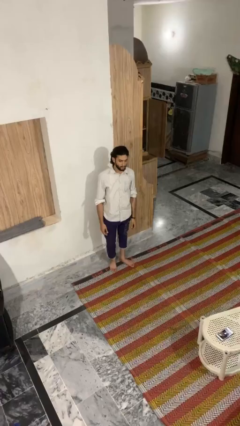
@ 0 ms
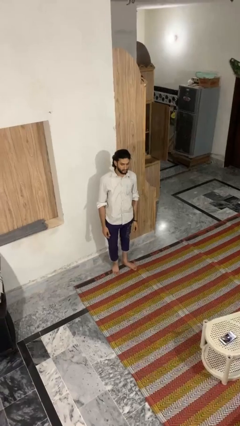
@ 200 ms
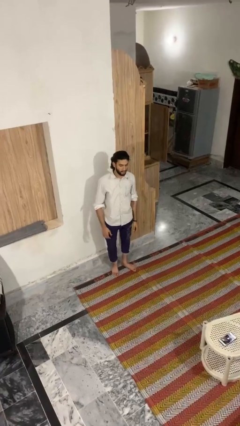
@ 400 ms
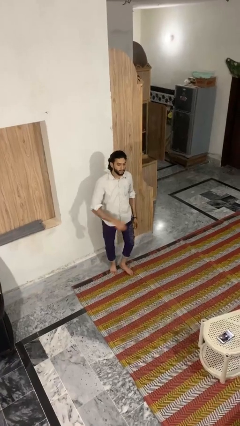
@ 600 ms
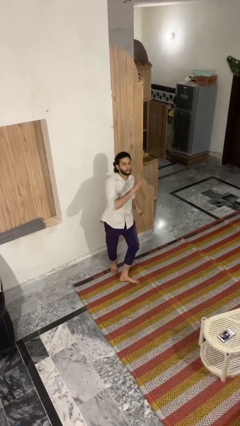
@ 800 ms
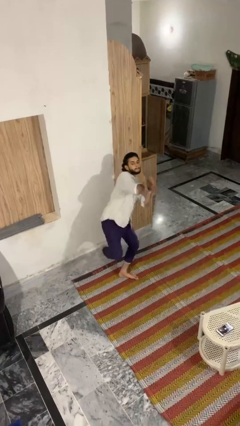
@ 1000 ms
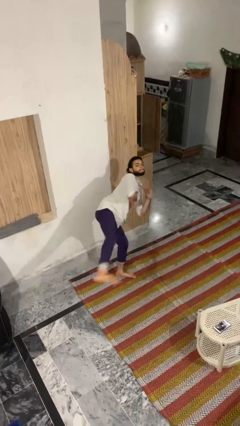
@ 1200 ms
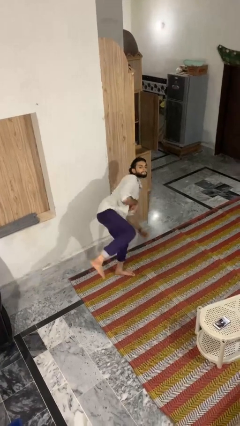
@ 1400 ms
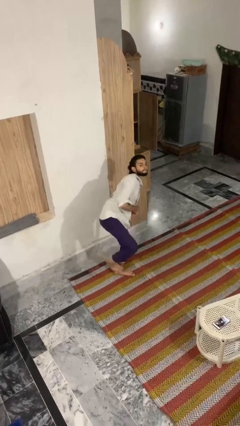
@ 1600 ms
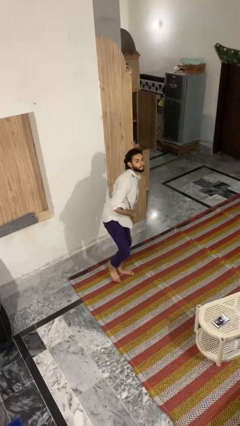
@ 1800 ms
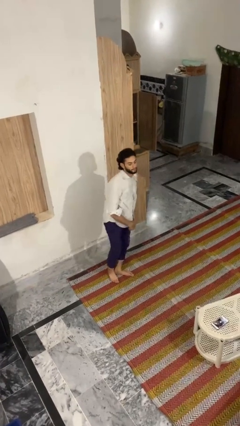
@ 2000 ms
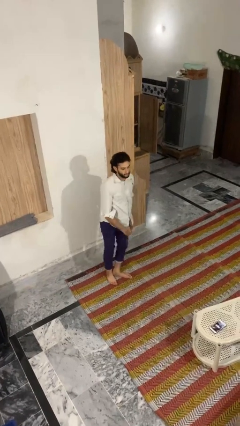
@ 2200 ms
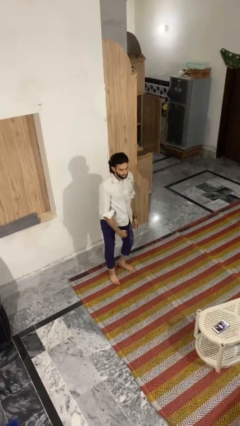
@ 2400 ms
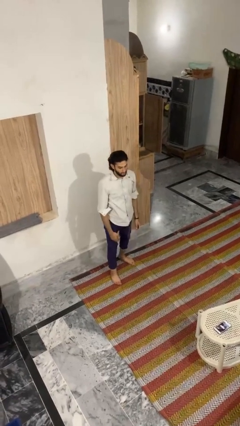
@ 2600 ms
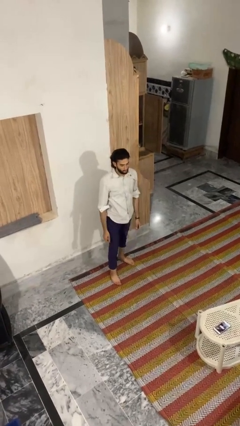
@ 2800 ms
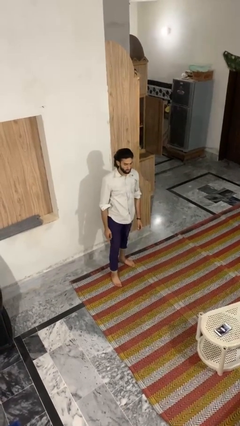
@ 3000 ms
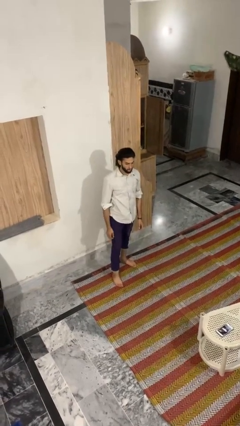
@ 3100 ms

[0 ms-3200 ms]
person karate kicks

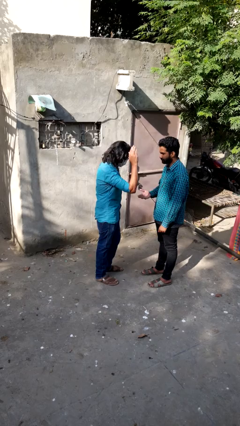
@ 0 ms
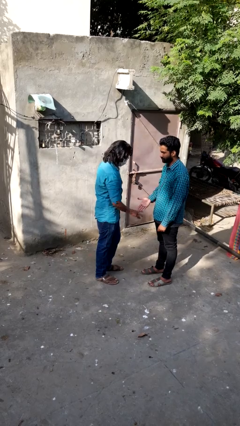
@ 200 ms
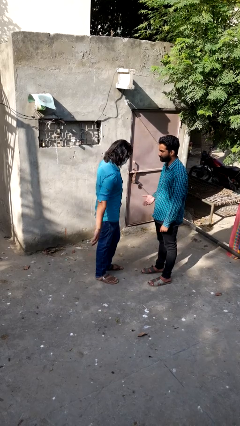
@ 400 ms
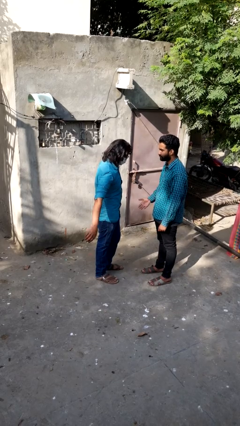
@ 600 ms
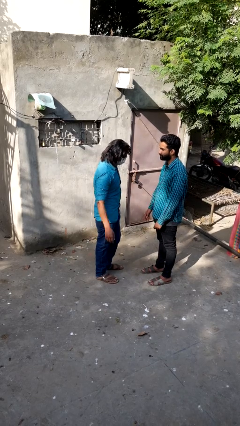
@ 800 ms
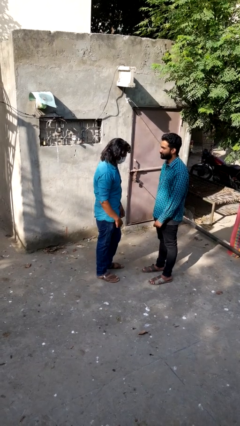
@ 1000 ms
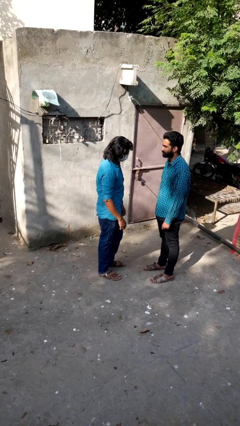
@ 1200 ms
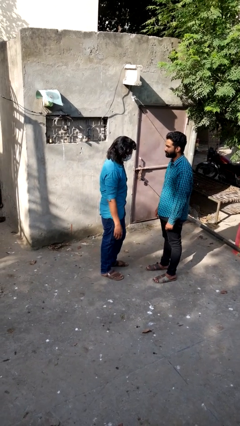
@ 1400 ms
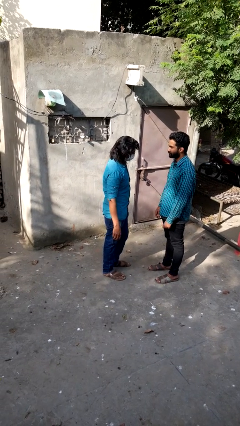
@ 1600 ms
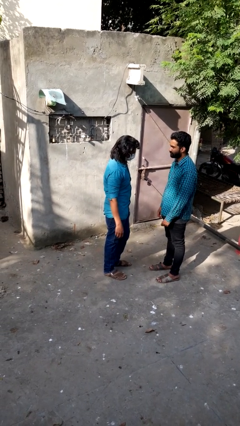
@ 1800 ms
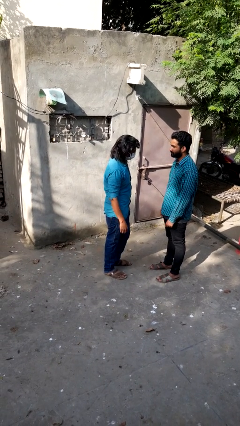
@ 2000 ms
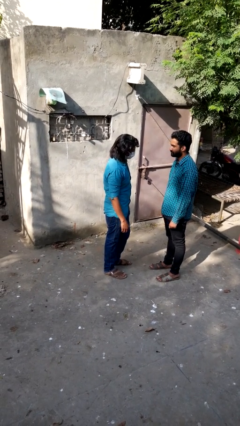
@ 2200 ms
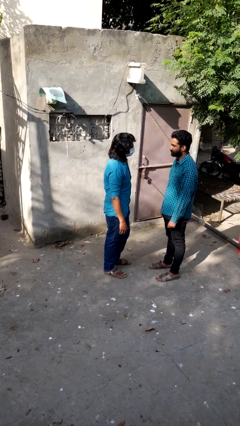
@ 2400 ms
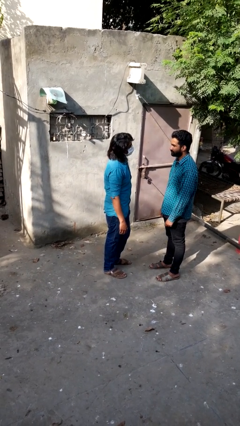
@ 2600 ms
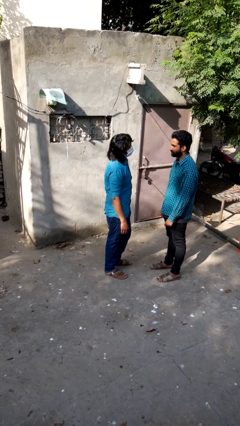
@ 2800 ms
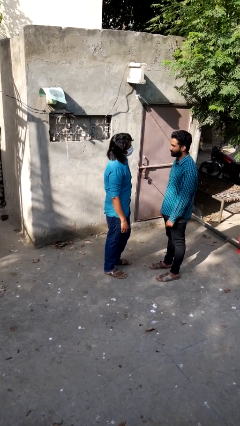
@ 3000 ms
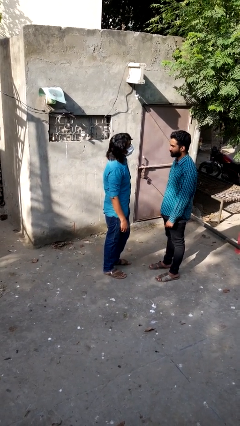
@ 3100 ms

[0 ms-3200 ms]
person highfives hand

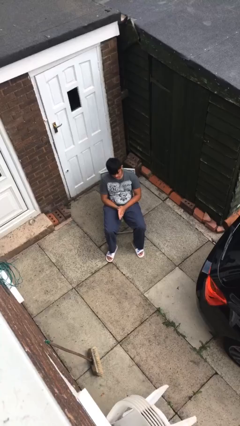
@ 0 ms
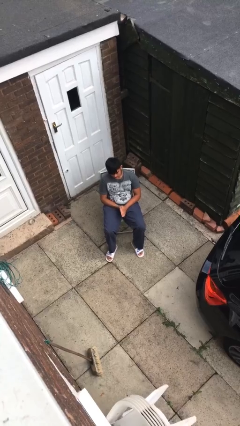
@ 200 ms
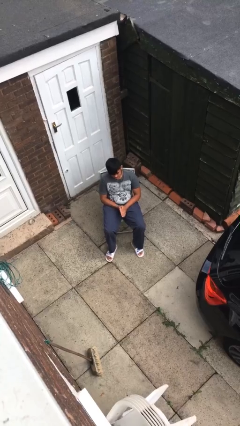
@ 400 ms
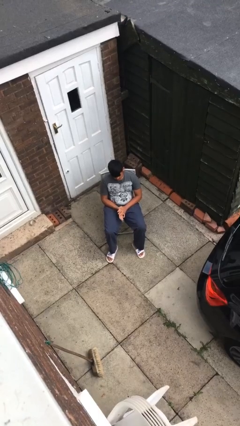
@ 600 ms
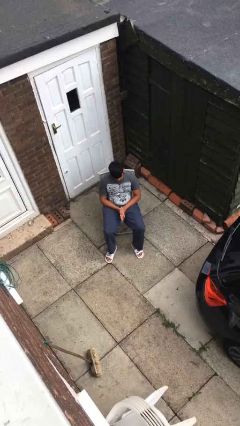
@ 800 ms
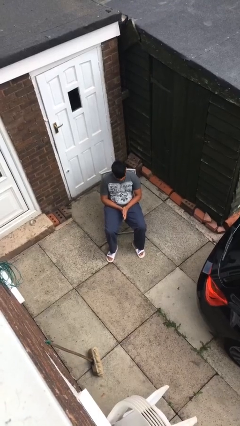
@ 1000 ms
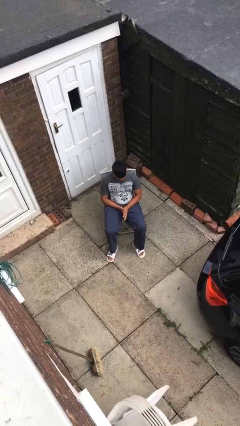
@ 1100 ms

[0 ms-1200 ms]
person looks at hands in lap

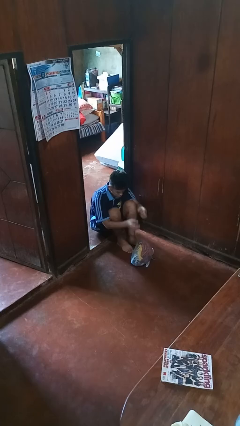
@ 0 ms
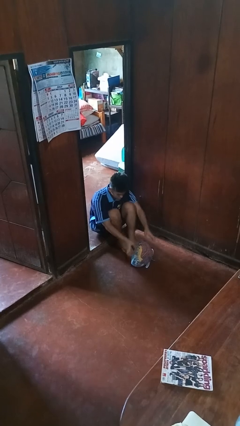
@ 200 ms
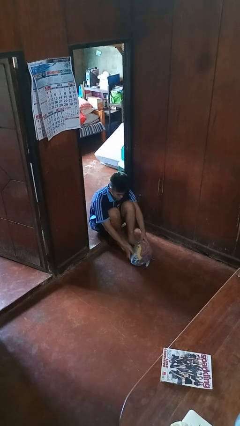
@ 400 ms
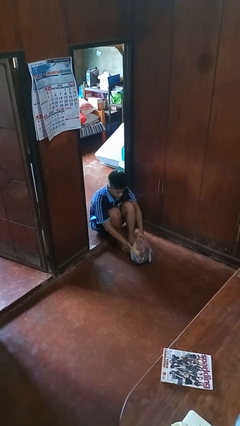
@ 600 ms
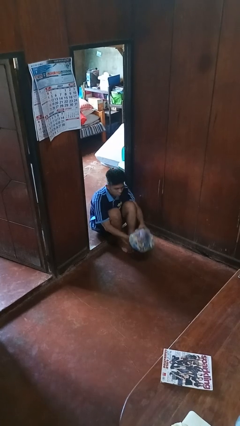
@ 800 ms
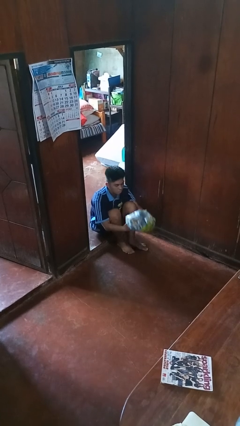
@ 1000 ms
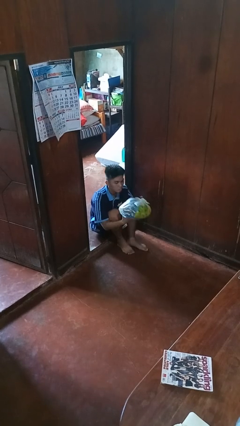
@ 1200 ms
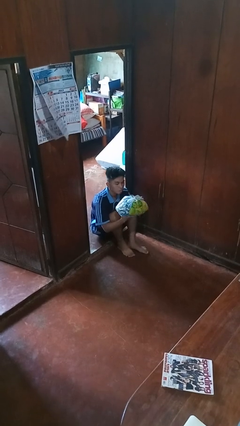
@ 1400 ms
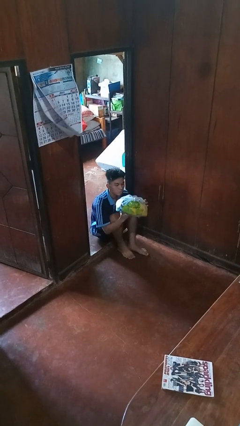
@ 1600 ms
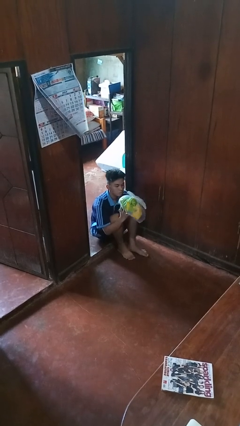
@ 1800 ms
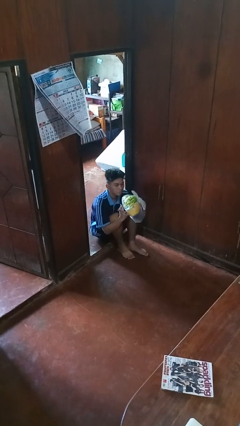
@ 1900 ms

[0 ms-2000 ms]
person picks up object from floor

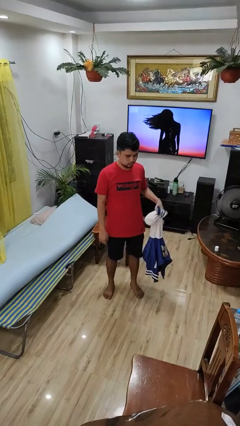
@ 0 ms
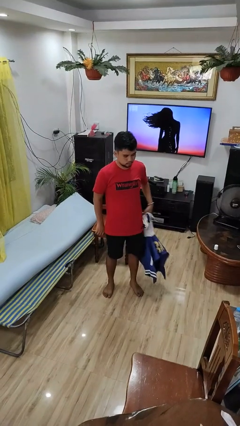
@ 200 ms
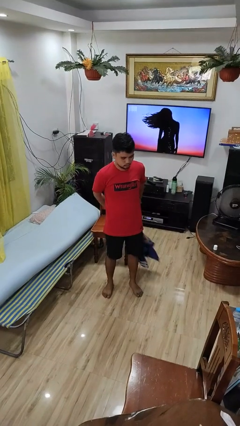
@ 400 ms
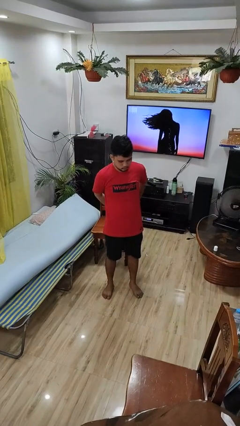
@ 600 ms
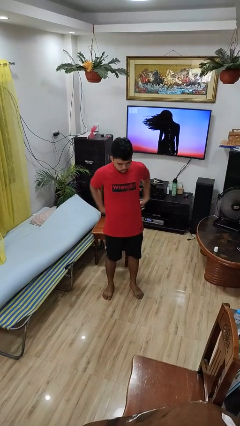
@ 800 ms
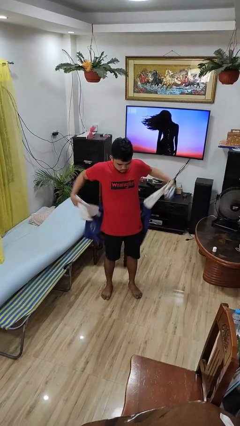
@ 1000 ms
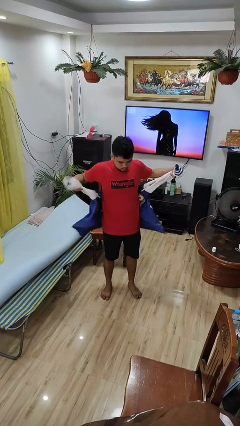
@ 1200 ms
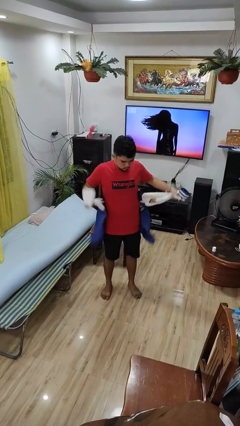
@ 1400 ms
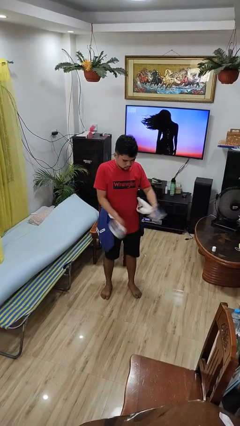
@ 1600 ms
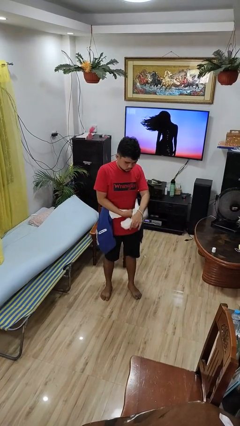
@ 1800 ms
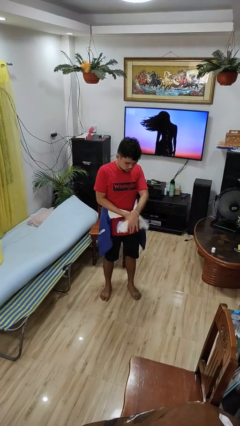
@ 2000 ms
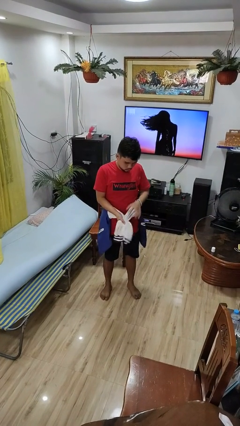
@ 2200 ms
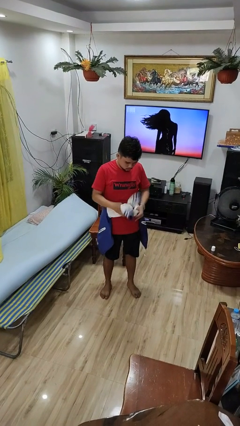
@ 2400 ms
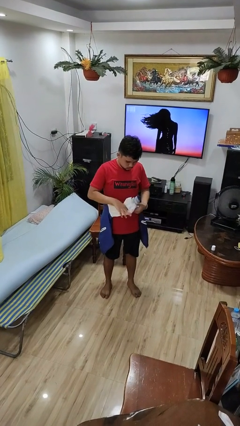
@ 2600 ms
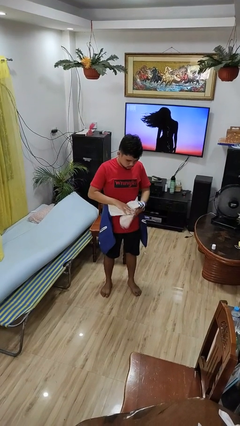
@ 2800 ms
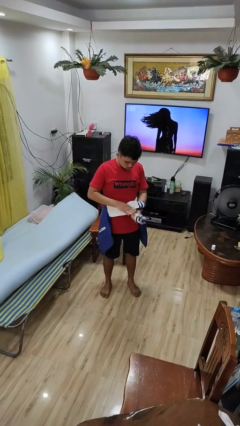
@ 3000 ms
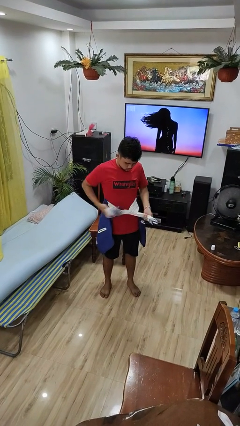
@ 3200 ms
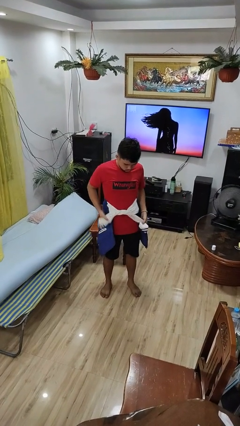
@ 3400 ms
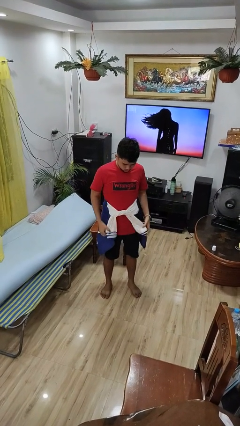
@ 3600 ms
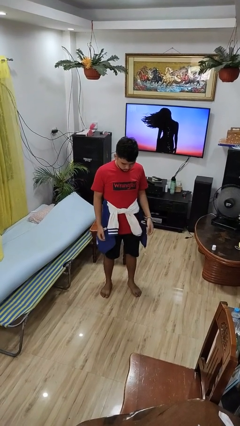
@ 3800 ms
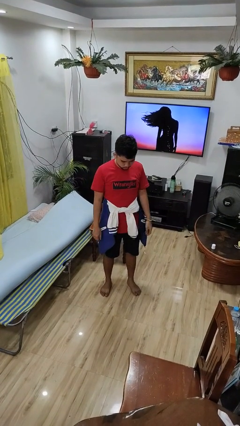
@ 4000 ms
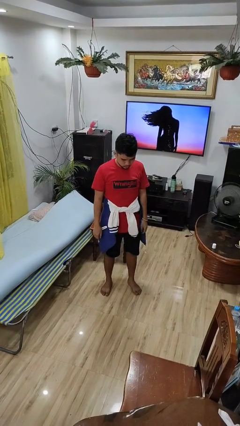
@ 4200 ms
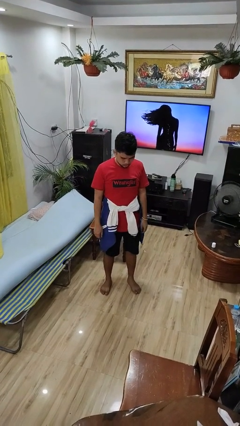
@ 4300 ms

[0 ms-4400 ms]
person ties jacket around waist

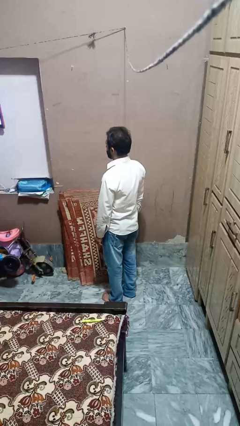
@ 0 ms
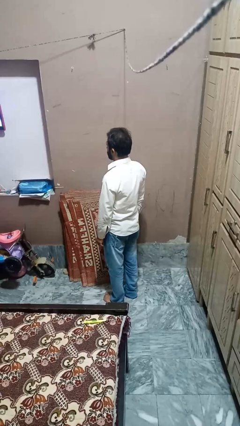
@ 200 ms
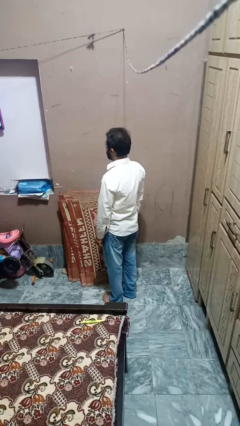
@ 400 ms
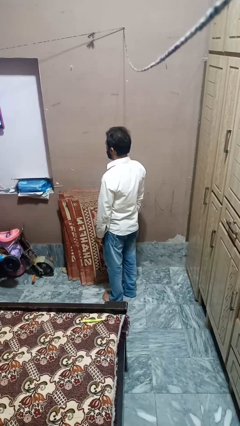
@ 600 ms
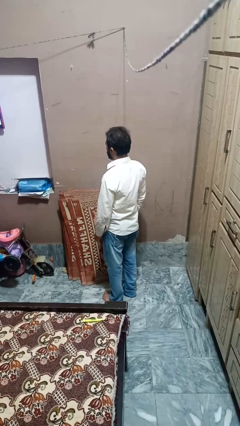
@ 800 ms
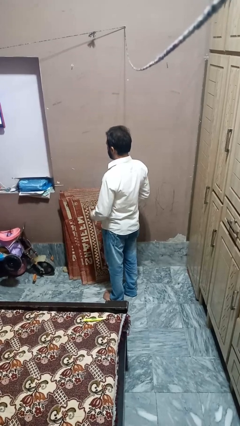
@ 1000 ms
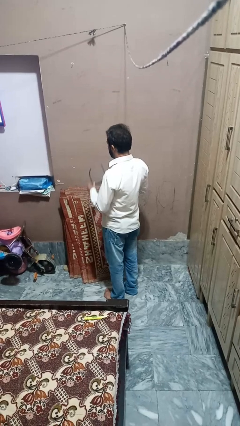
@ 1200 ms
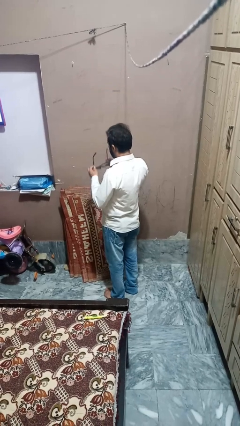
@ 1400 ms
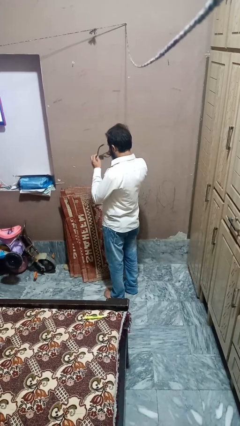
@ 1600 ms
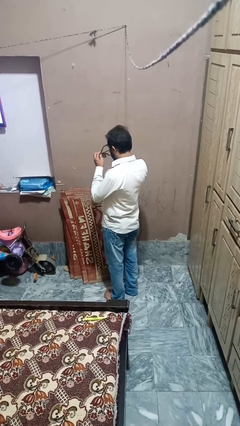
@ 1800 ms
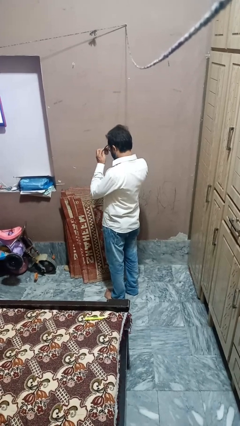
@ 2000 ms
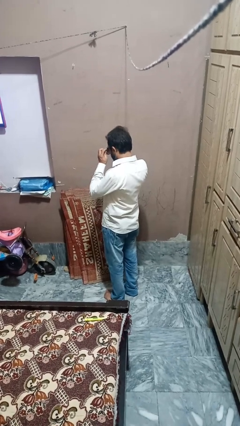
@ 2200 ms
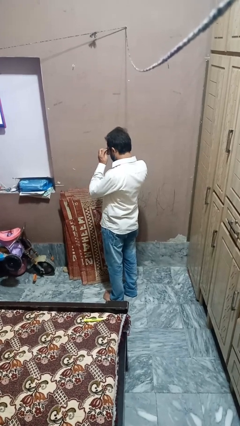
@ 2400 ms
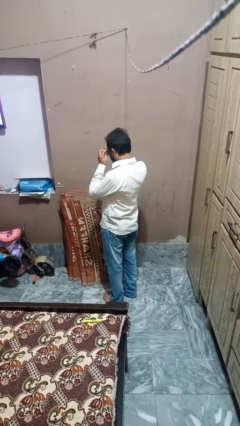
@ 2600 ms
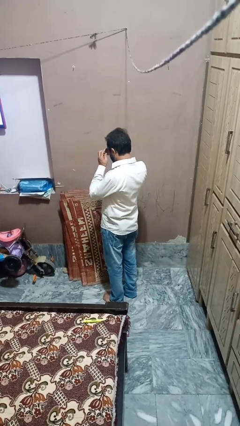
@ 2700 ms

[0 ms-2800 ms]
person puts on sunglasses

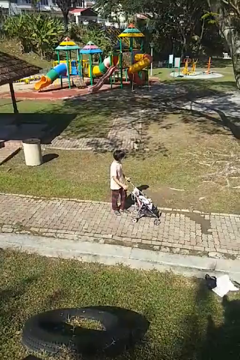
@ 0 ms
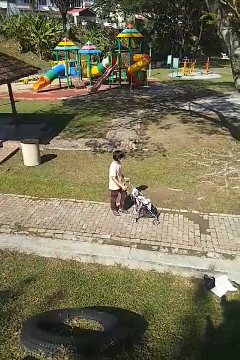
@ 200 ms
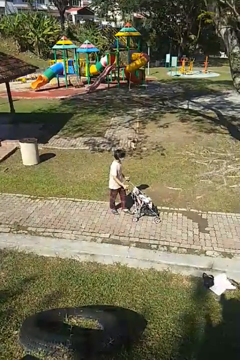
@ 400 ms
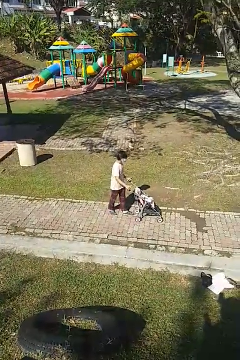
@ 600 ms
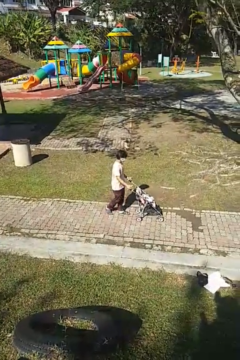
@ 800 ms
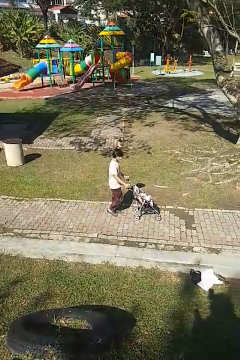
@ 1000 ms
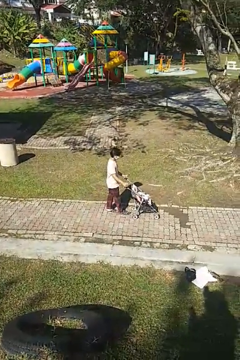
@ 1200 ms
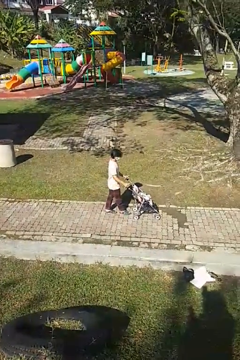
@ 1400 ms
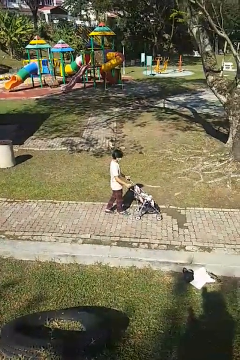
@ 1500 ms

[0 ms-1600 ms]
person pushes wheeled cart
